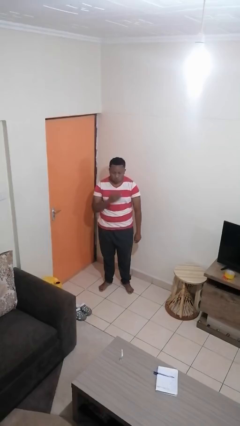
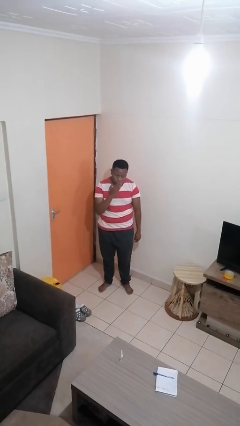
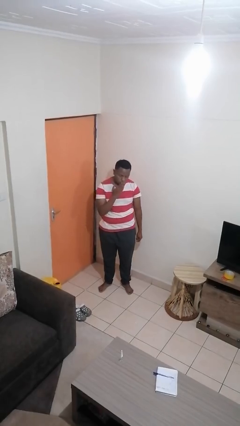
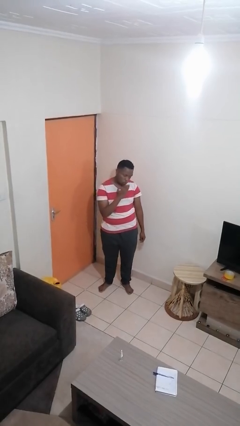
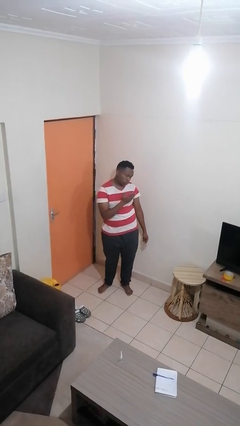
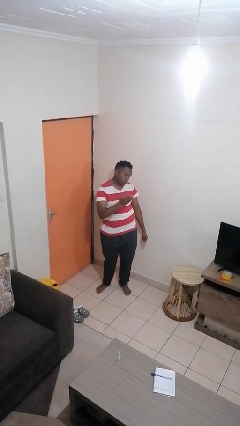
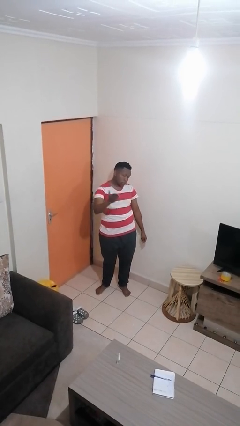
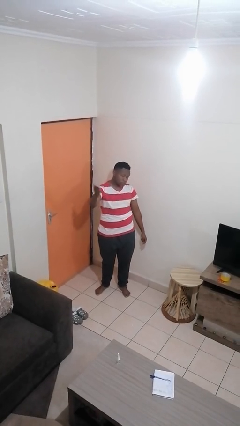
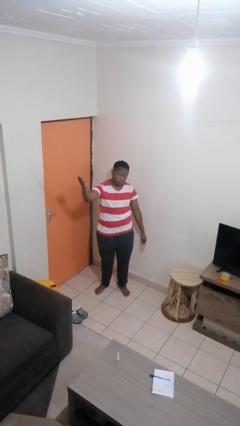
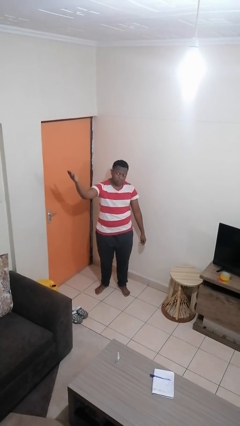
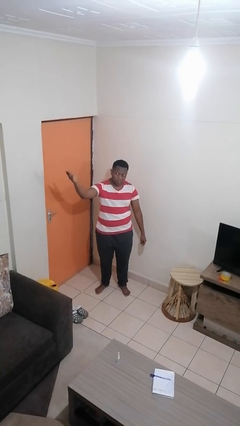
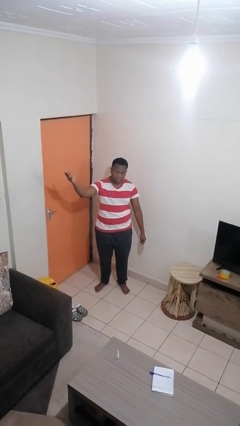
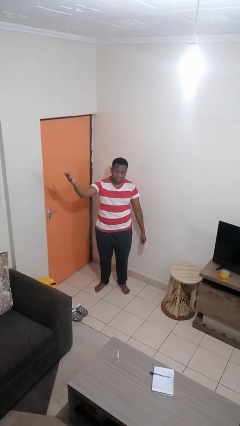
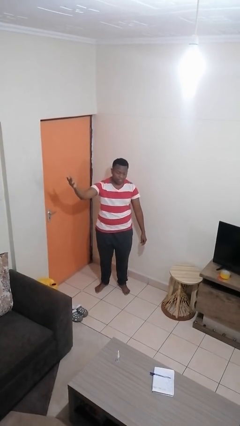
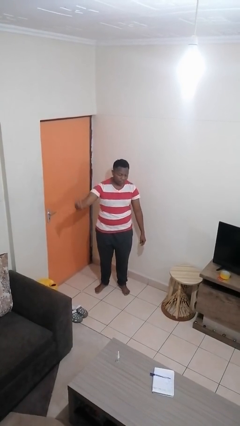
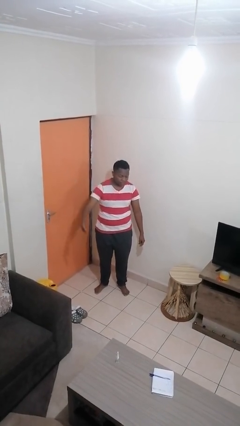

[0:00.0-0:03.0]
person gestures blow kiss

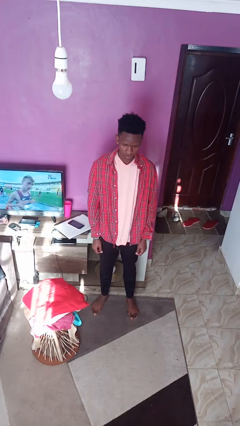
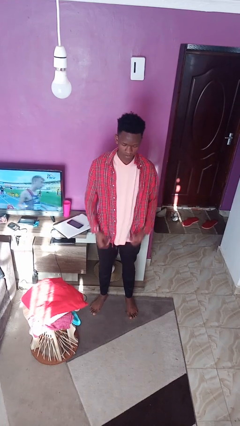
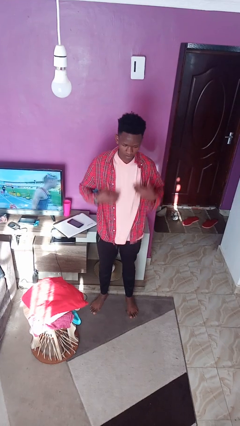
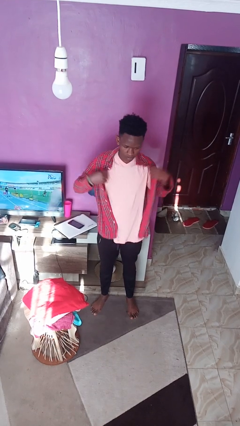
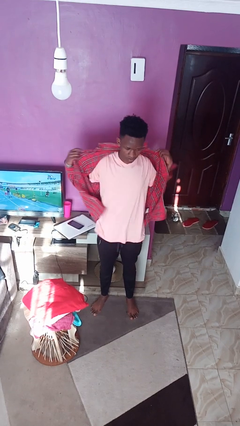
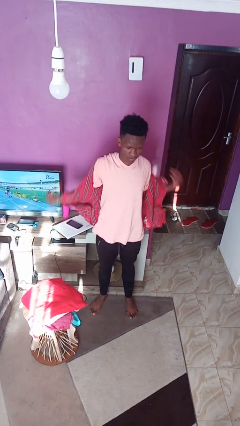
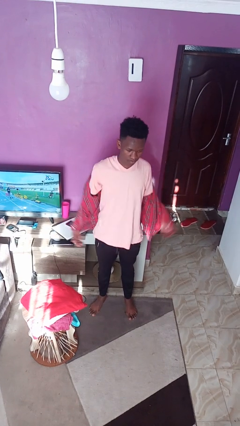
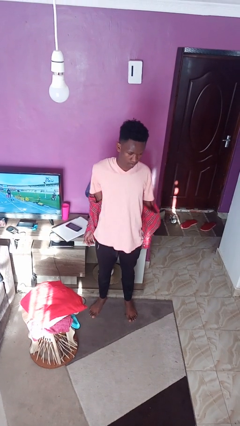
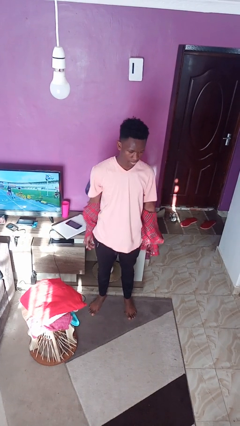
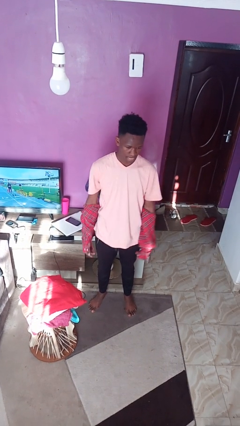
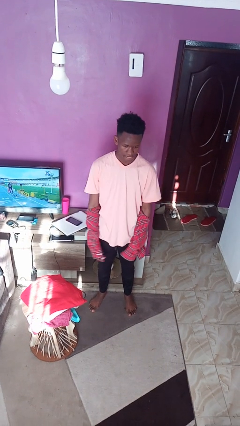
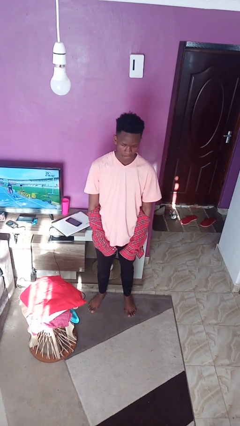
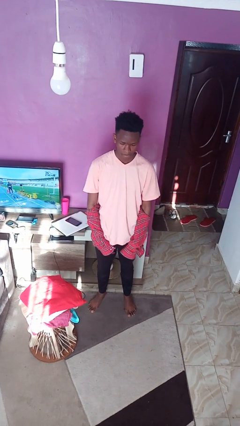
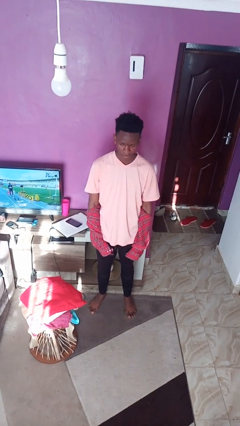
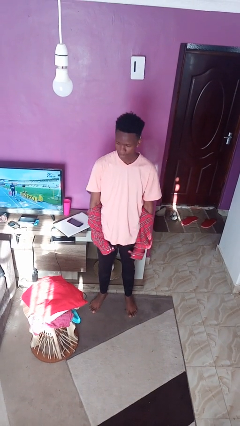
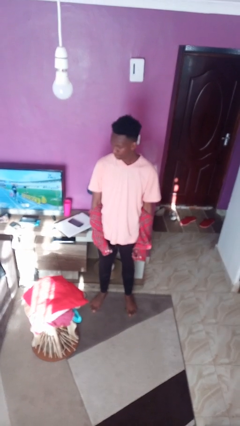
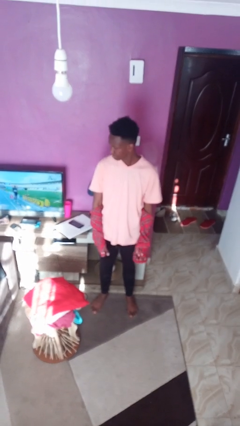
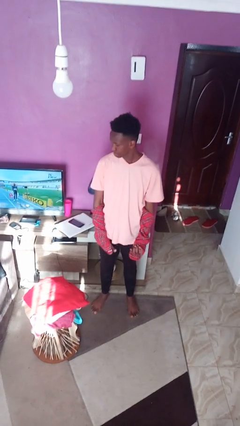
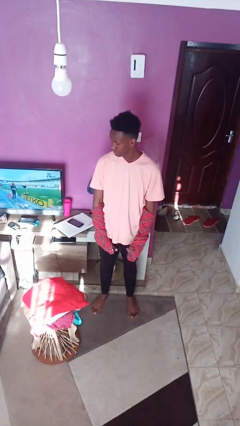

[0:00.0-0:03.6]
person takes off shirt

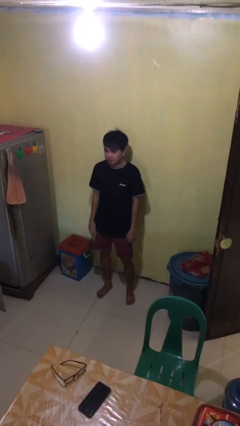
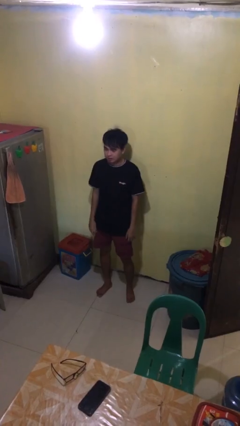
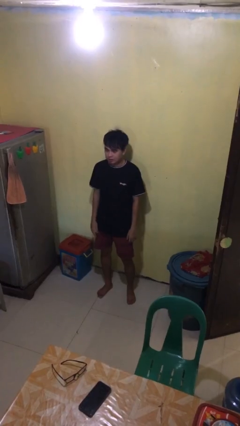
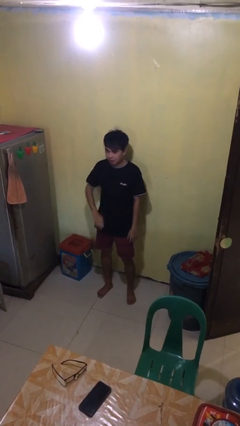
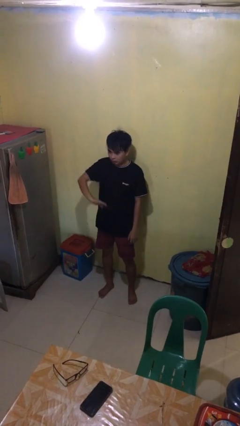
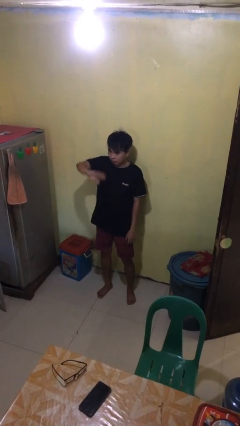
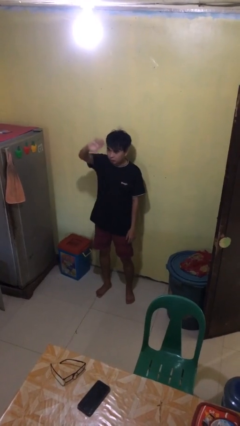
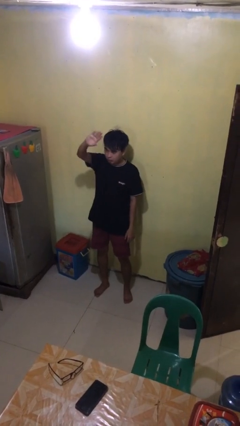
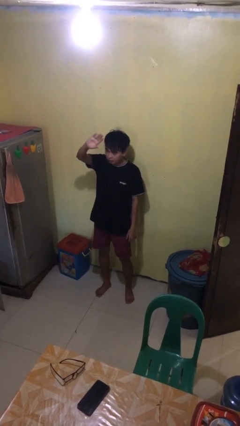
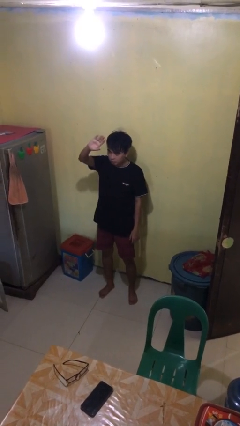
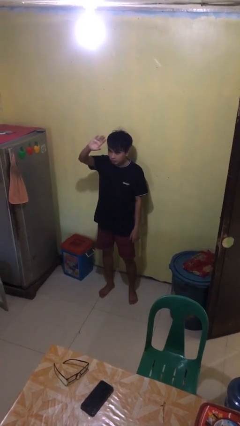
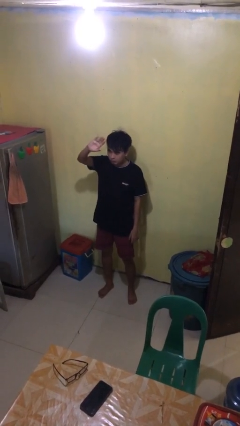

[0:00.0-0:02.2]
person gestures swipe up

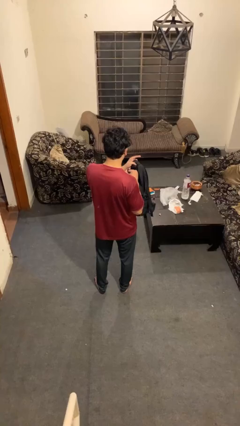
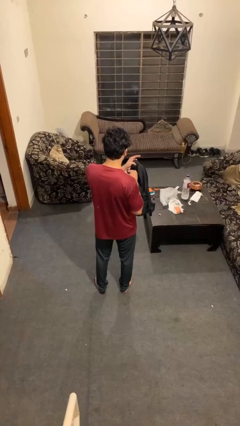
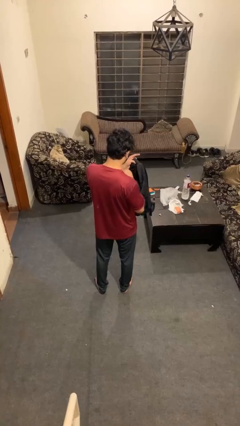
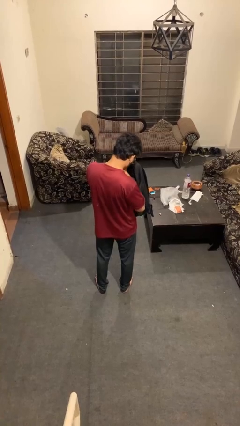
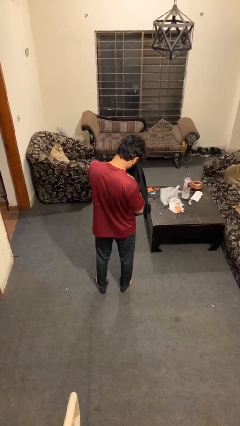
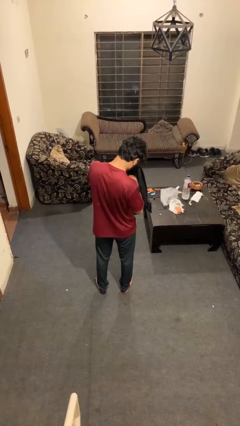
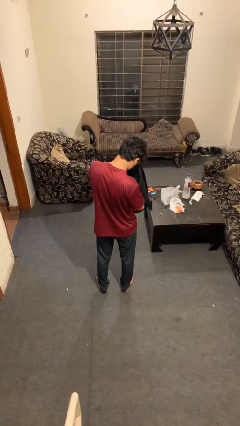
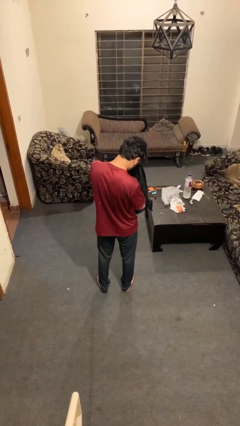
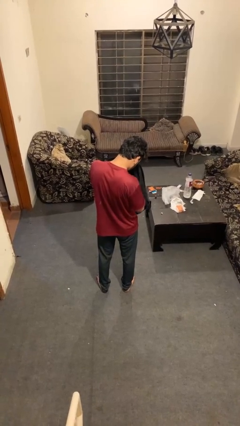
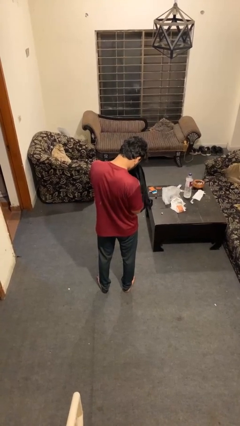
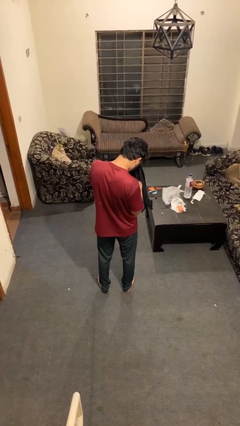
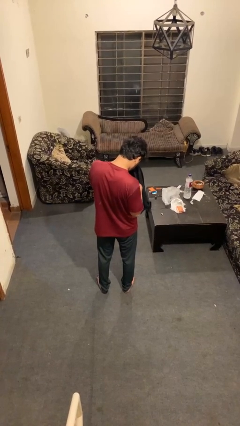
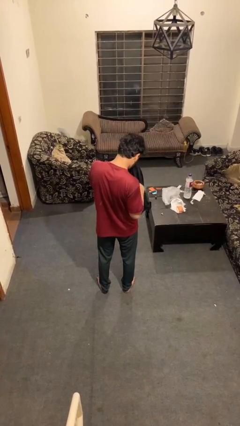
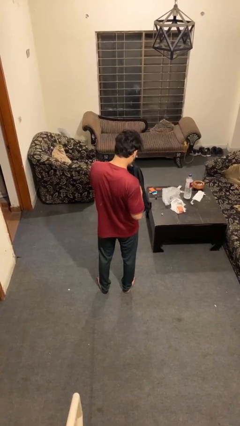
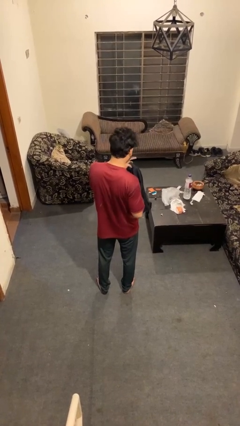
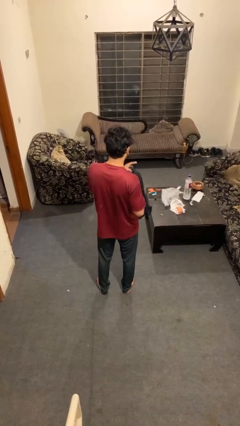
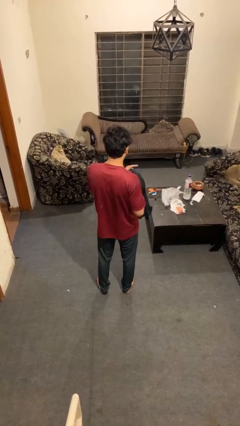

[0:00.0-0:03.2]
person searches in bag

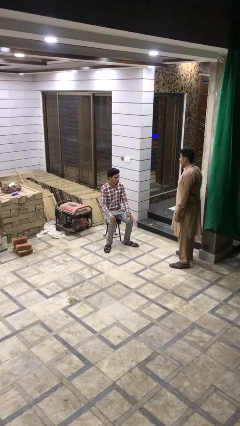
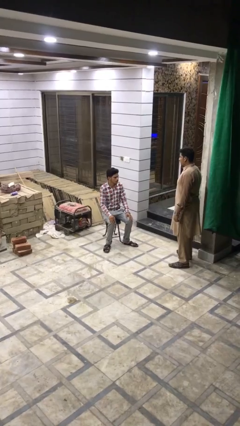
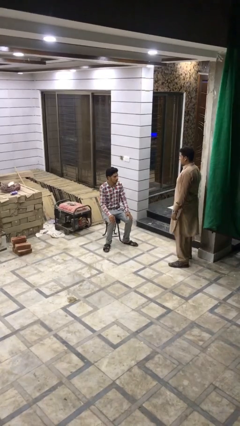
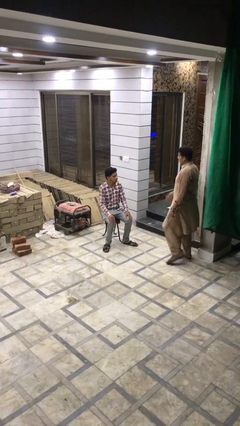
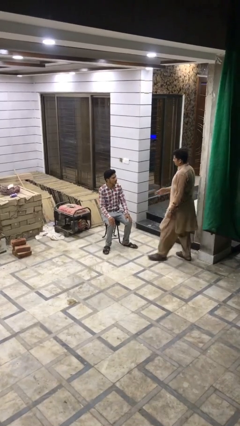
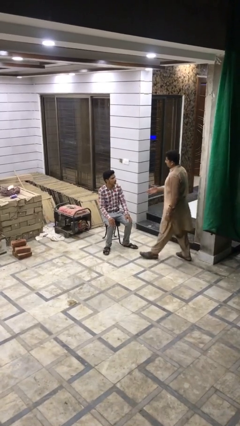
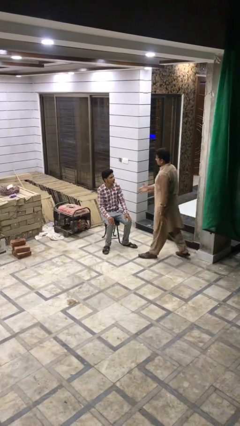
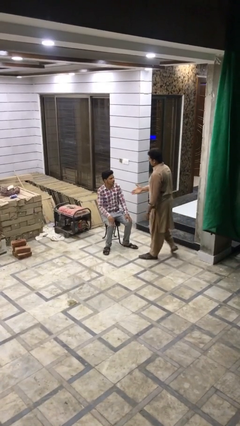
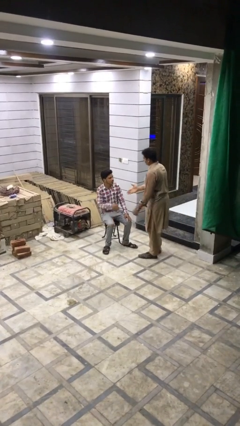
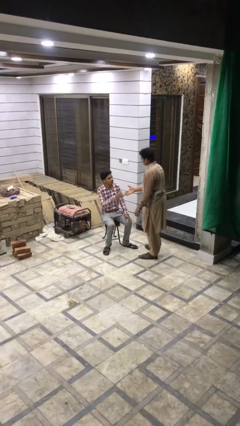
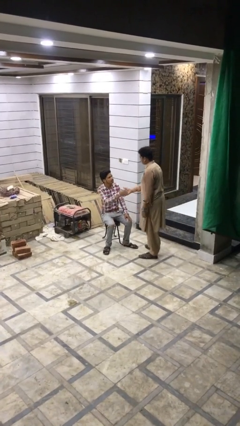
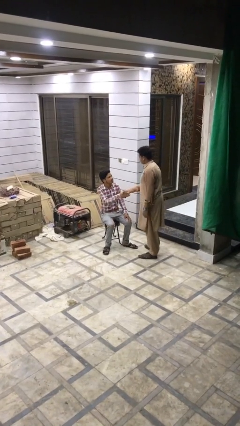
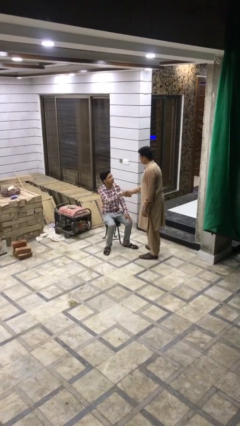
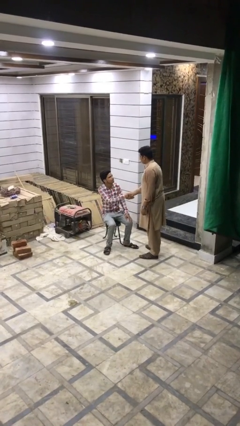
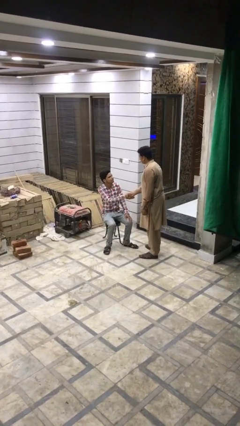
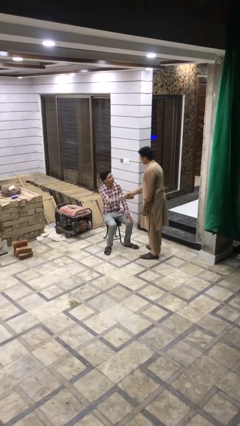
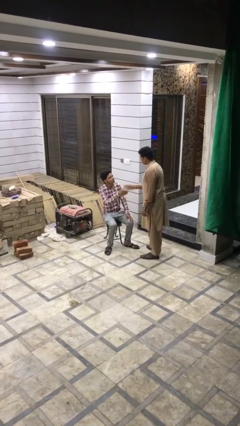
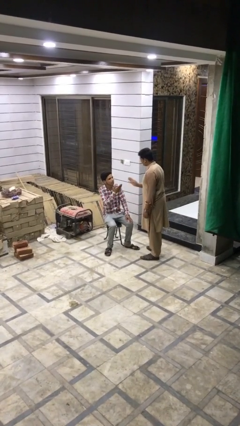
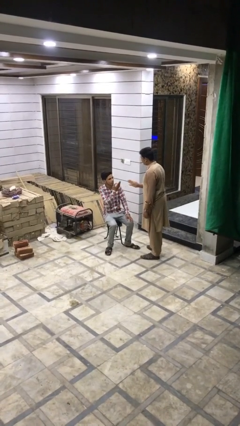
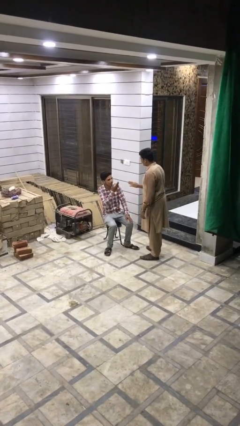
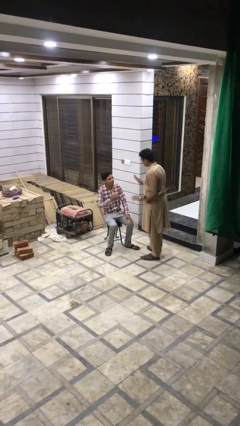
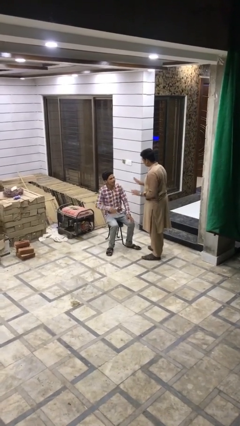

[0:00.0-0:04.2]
person shakes hand

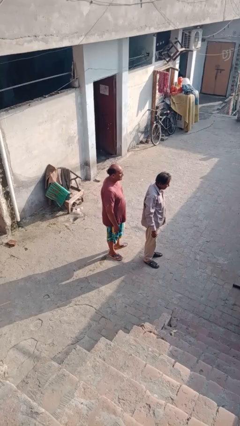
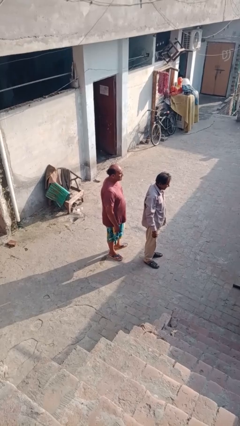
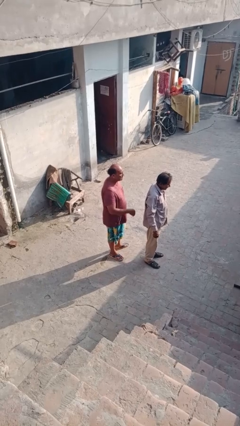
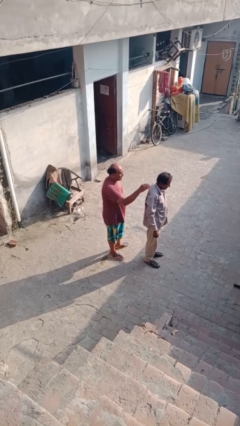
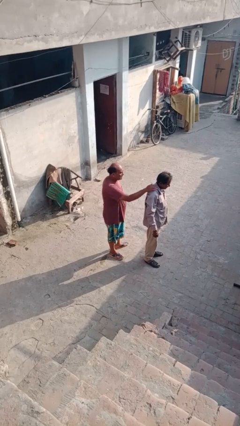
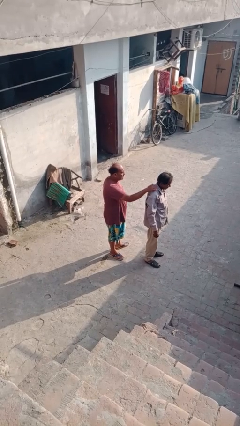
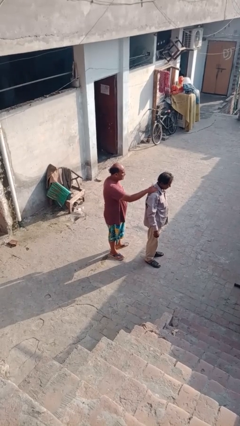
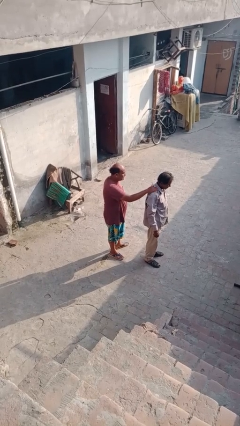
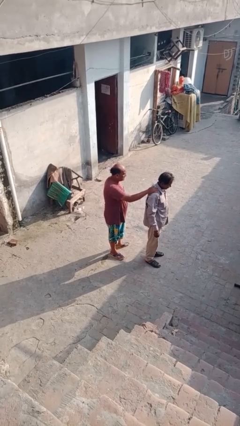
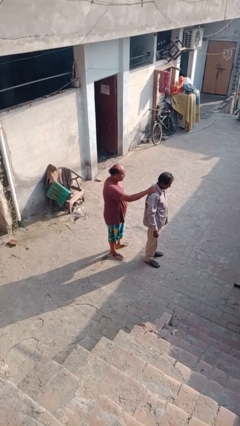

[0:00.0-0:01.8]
person touches back of person
